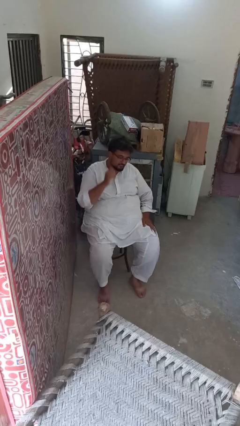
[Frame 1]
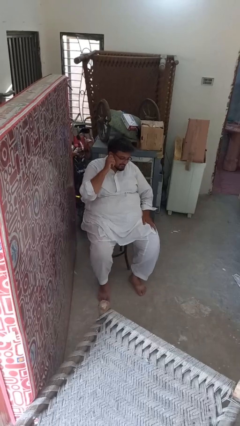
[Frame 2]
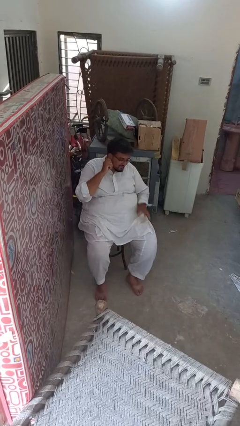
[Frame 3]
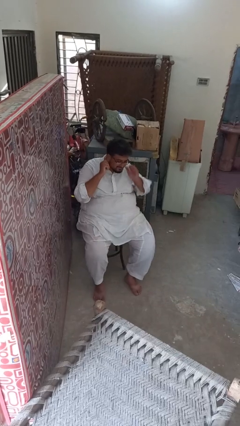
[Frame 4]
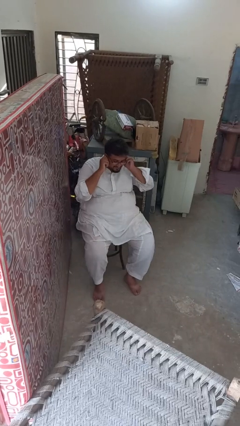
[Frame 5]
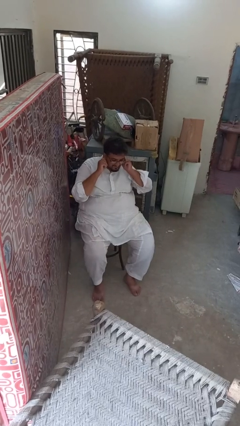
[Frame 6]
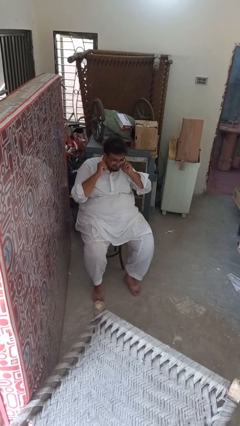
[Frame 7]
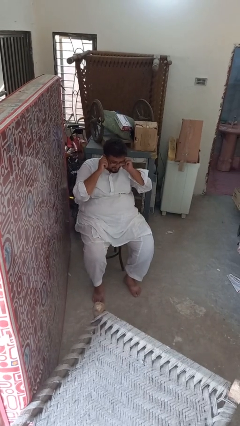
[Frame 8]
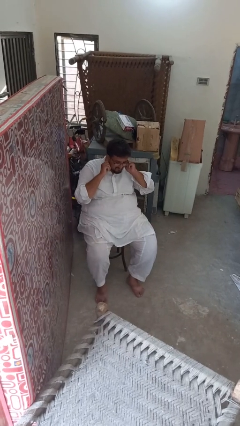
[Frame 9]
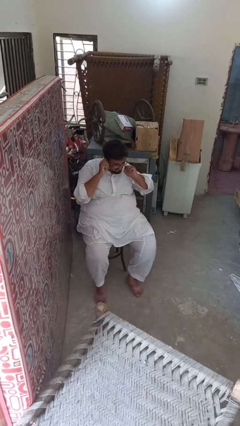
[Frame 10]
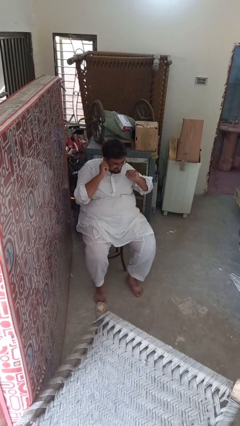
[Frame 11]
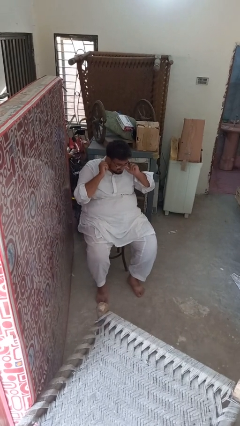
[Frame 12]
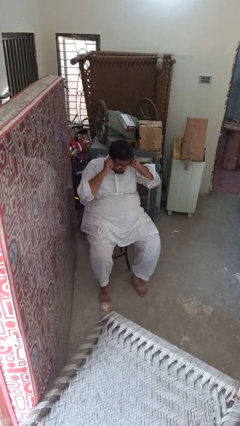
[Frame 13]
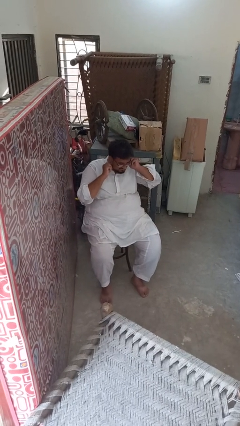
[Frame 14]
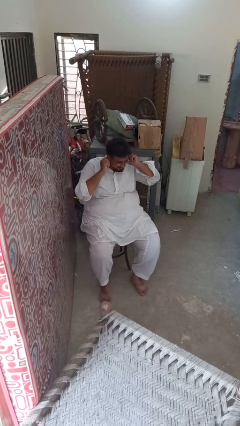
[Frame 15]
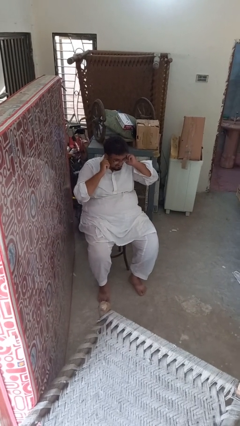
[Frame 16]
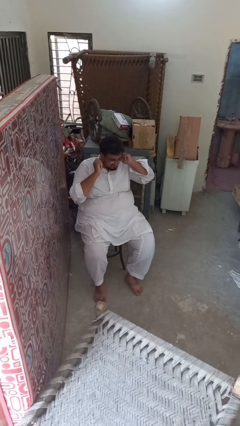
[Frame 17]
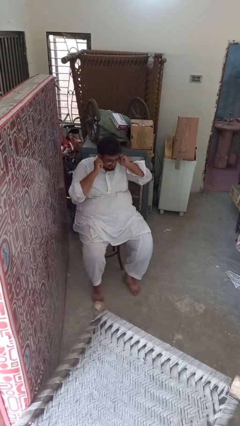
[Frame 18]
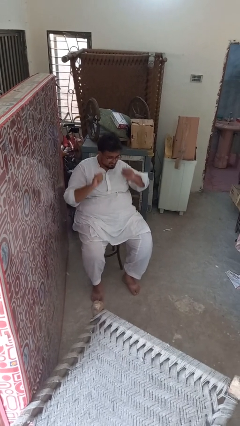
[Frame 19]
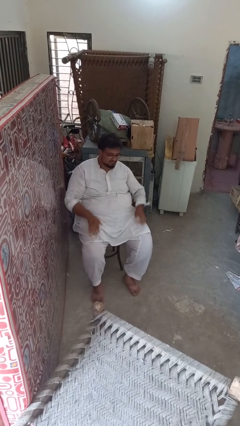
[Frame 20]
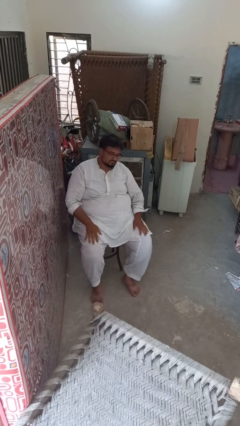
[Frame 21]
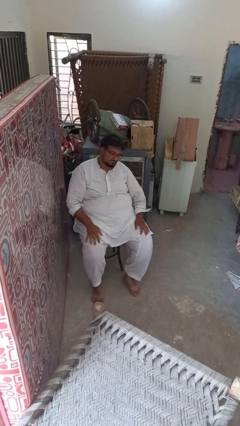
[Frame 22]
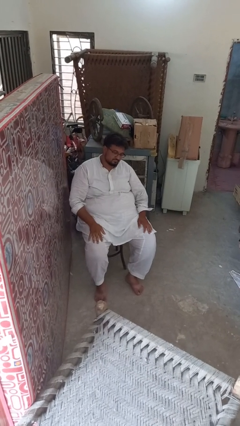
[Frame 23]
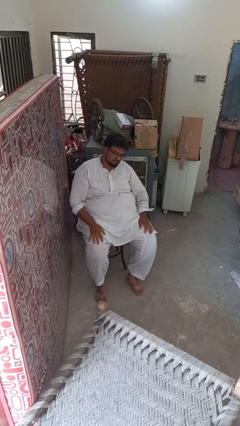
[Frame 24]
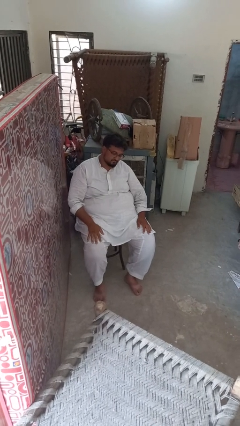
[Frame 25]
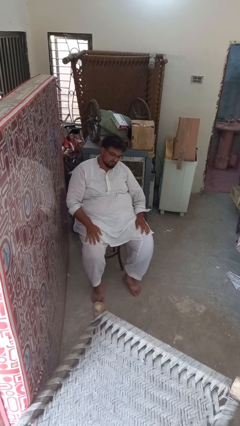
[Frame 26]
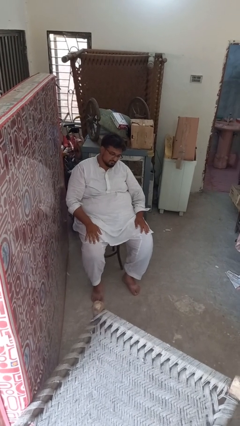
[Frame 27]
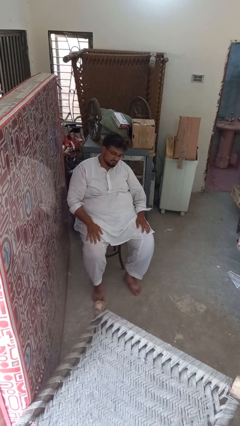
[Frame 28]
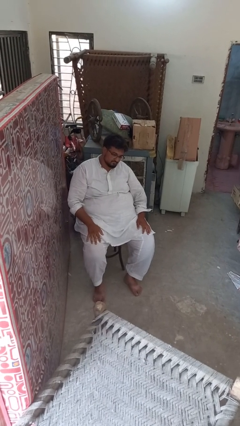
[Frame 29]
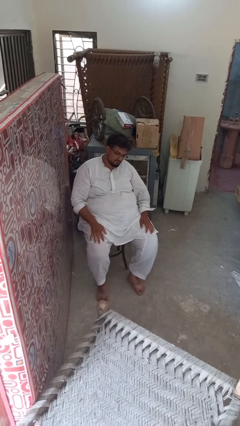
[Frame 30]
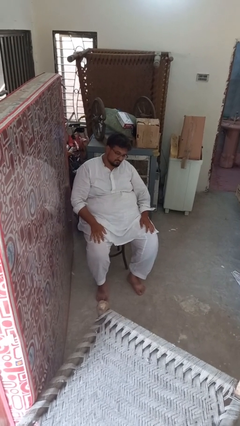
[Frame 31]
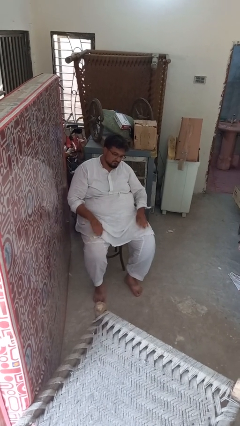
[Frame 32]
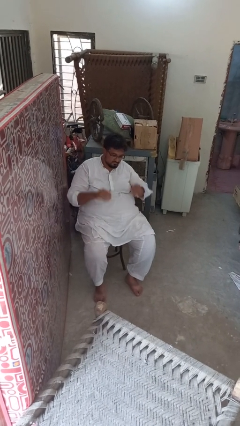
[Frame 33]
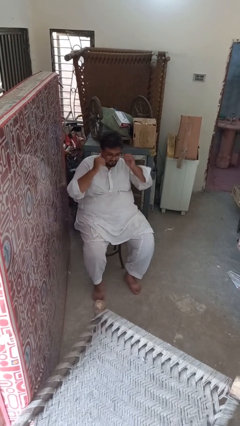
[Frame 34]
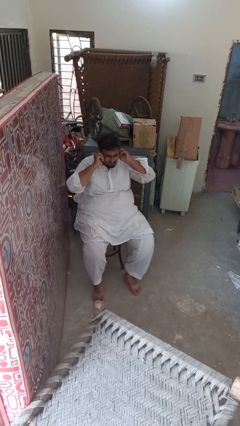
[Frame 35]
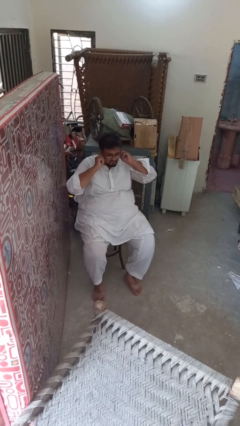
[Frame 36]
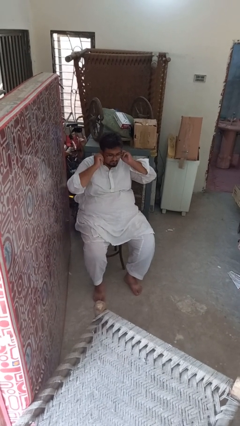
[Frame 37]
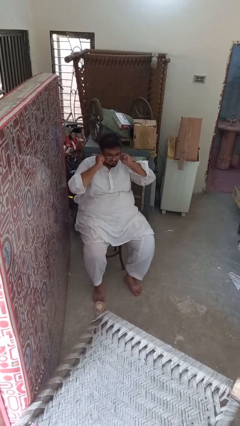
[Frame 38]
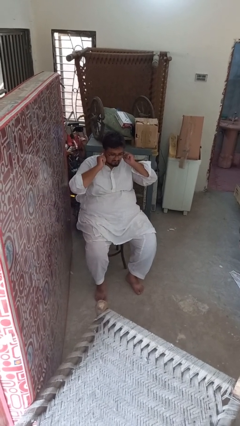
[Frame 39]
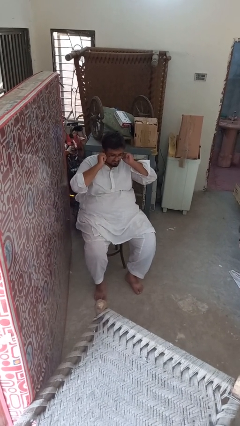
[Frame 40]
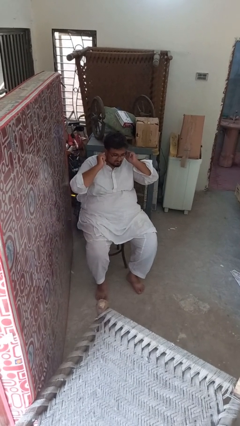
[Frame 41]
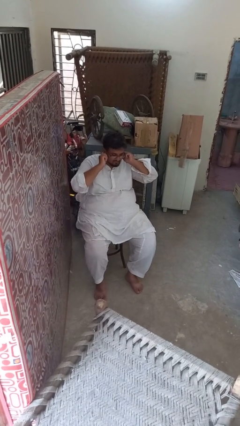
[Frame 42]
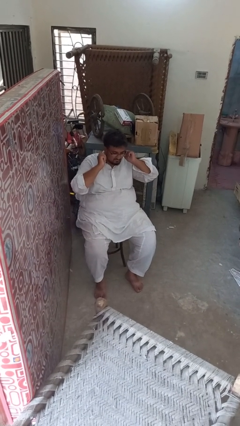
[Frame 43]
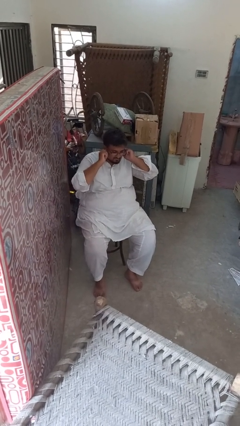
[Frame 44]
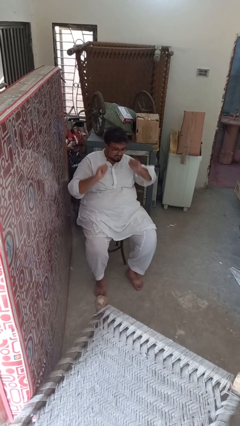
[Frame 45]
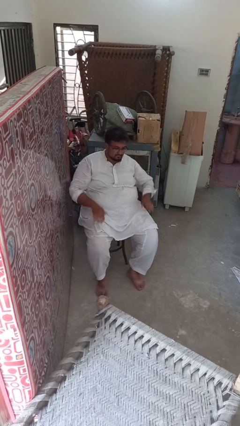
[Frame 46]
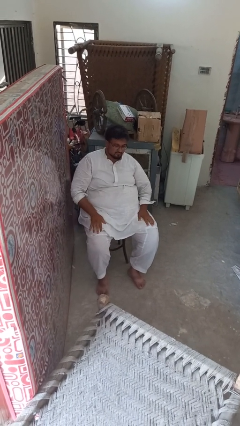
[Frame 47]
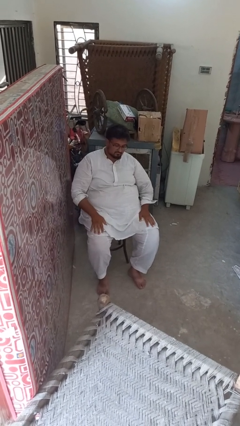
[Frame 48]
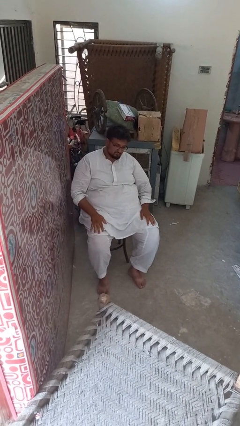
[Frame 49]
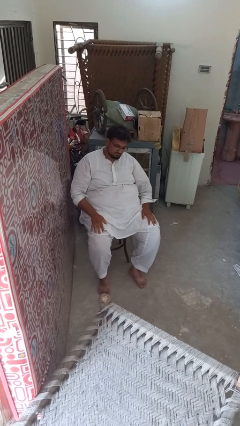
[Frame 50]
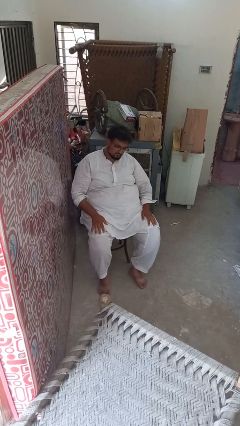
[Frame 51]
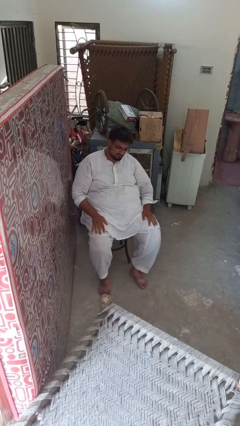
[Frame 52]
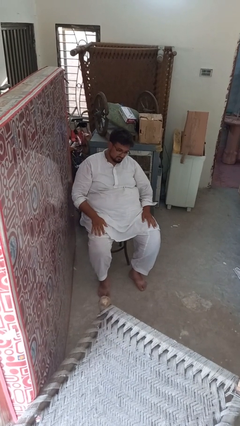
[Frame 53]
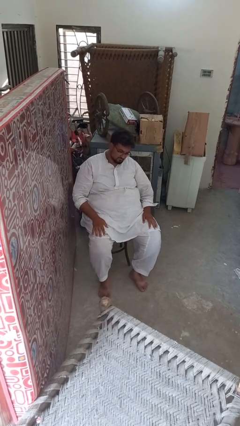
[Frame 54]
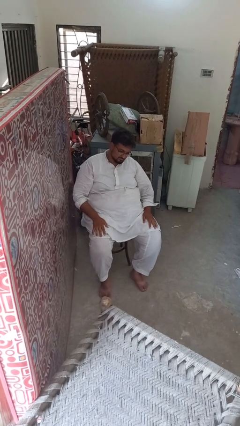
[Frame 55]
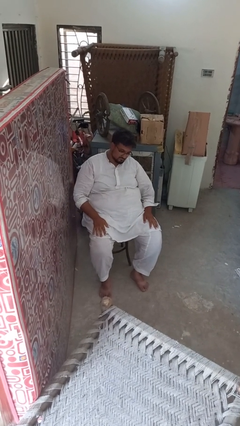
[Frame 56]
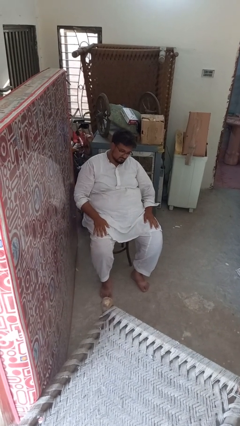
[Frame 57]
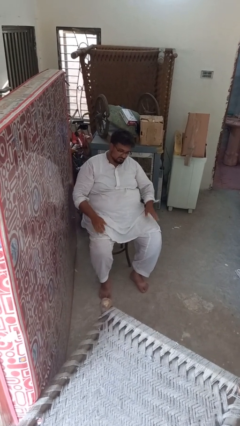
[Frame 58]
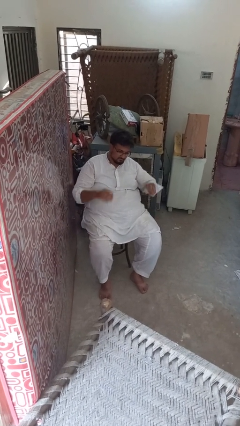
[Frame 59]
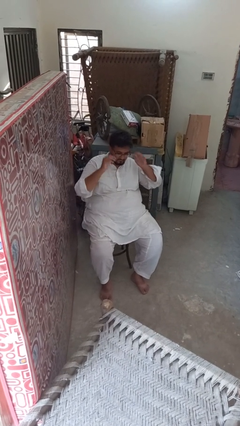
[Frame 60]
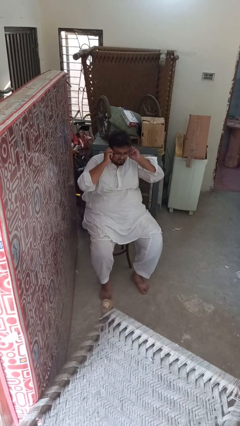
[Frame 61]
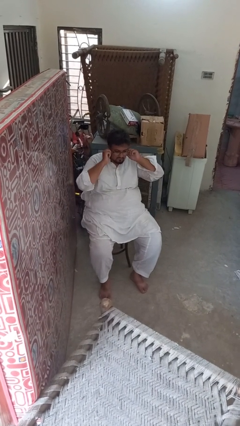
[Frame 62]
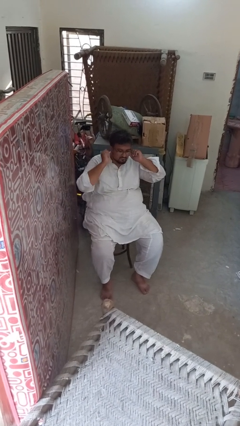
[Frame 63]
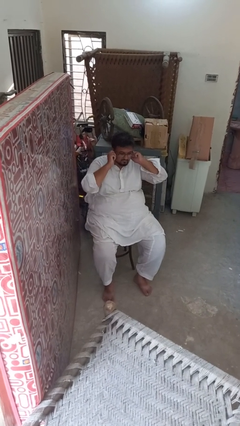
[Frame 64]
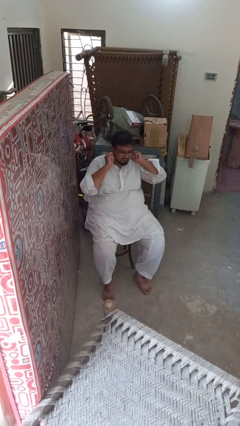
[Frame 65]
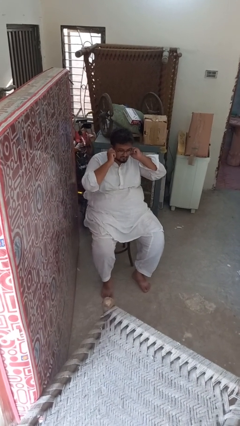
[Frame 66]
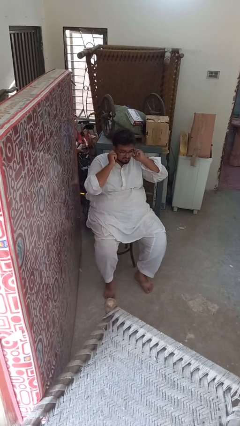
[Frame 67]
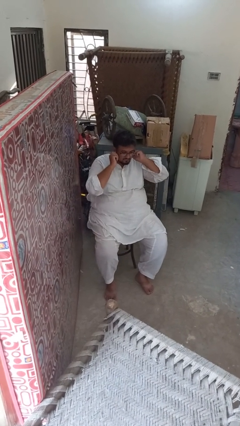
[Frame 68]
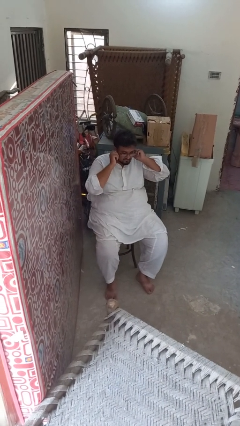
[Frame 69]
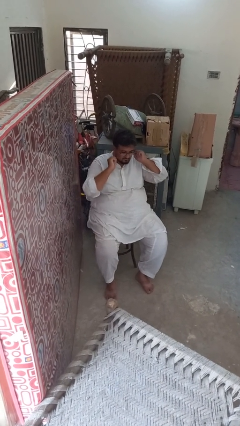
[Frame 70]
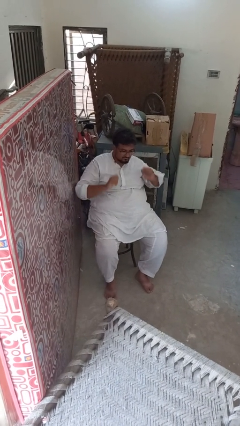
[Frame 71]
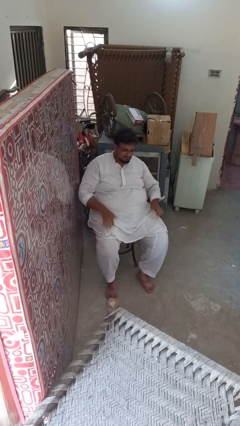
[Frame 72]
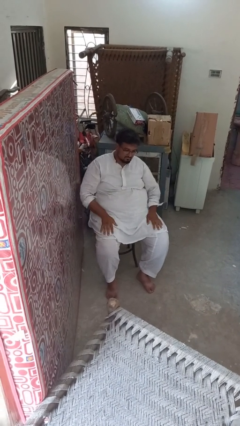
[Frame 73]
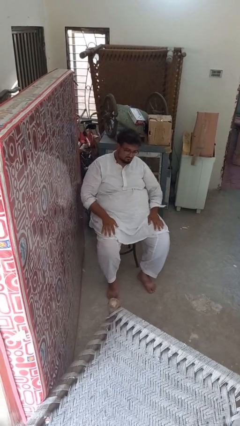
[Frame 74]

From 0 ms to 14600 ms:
person touches earlobe

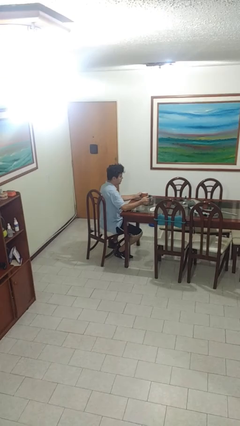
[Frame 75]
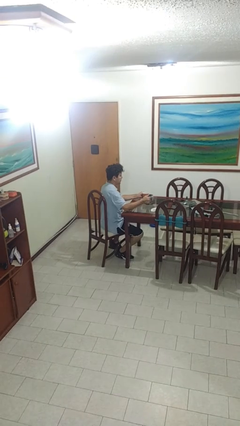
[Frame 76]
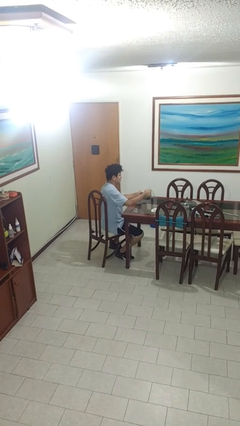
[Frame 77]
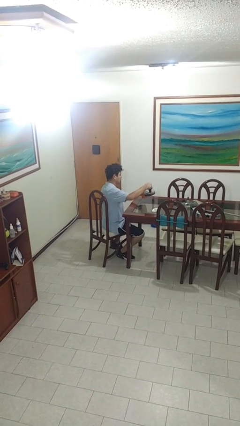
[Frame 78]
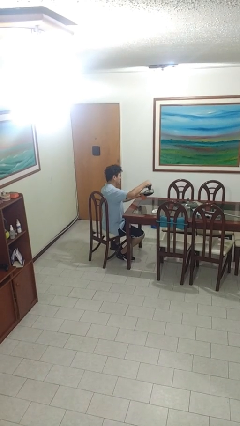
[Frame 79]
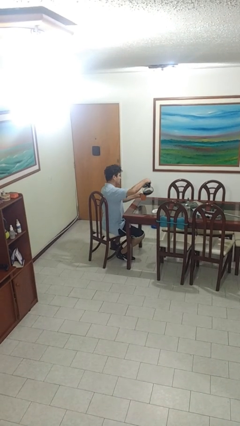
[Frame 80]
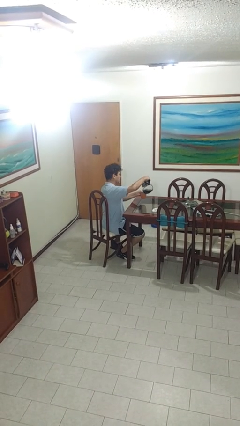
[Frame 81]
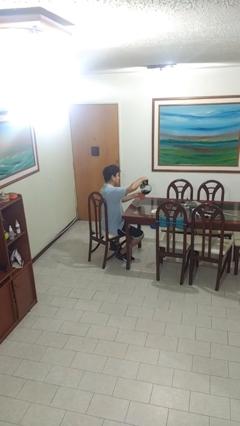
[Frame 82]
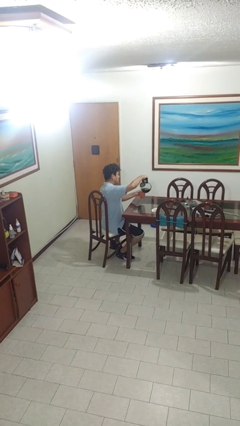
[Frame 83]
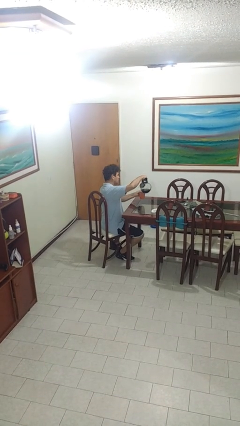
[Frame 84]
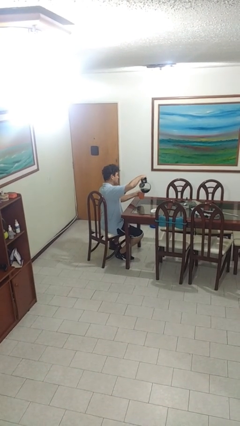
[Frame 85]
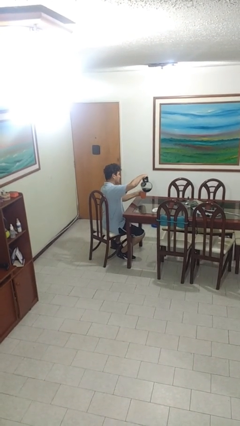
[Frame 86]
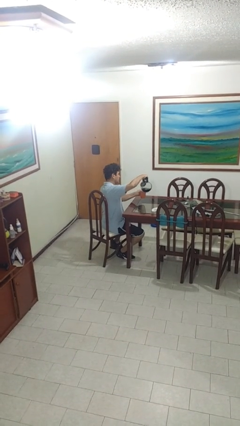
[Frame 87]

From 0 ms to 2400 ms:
person pours coffee into mug

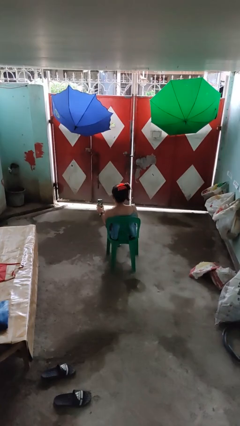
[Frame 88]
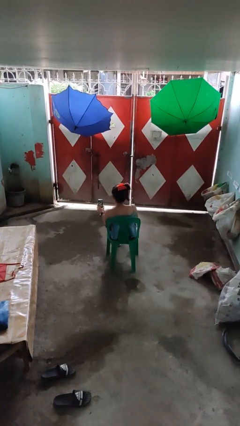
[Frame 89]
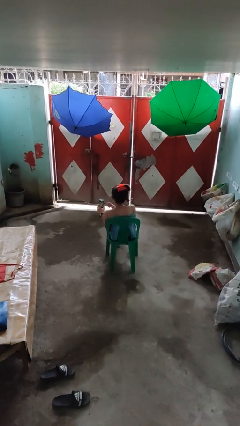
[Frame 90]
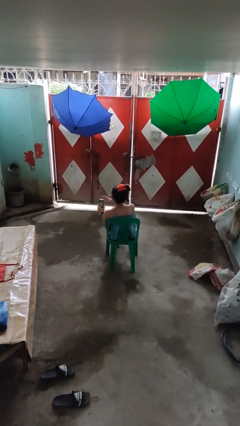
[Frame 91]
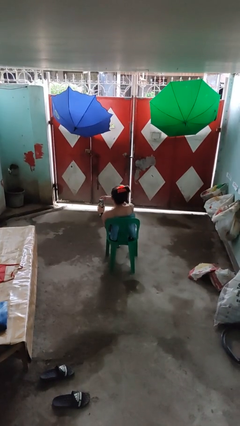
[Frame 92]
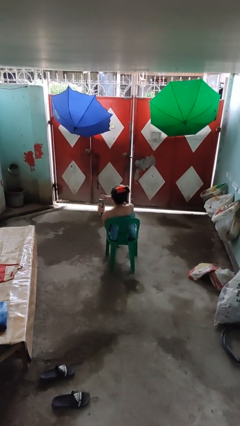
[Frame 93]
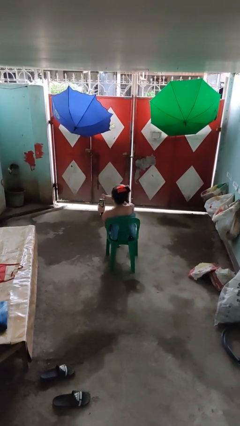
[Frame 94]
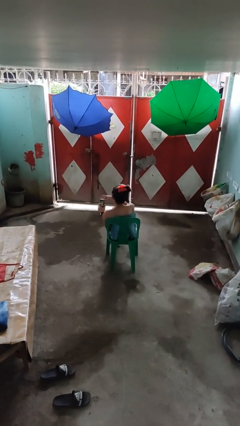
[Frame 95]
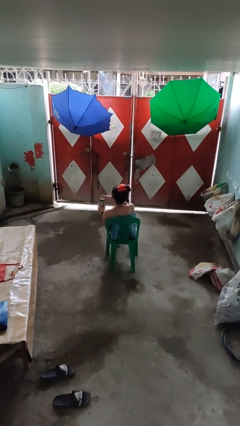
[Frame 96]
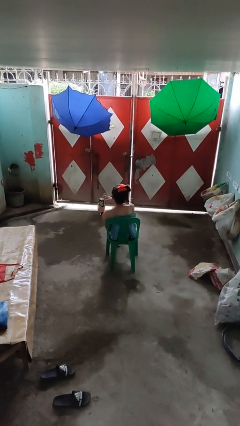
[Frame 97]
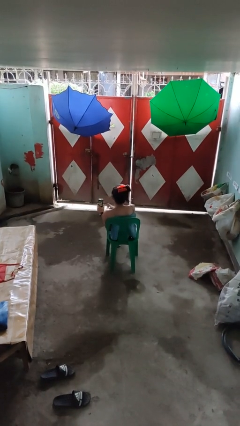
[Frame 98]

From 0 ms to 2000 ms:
person opens beverage can
